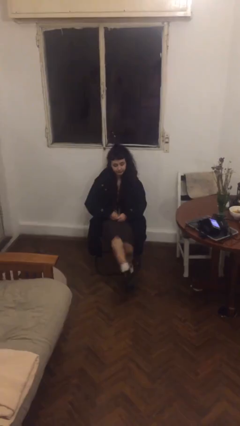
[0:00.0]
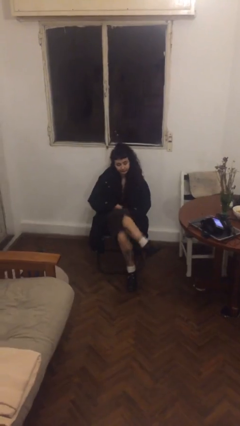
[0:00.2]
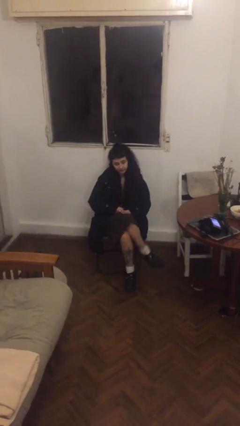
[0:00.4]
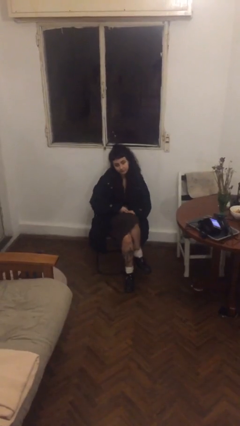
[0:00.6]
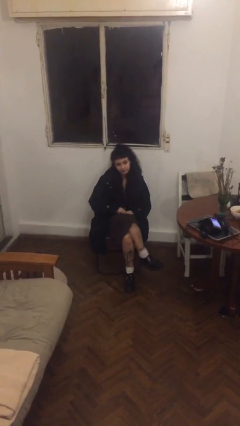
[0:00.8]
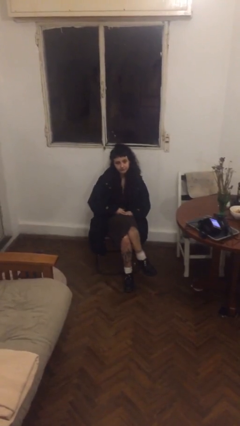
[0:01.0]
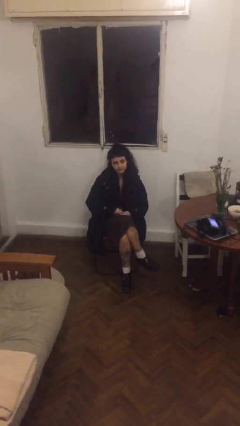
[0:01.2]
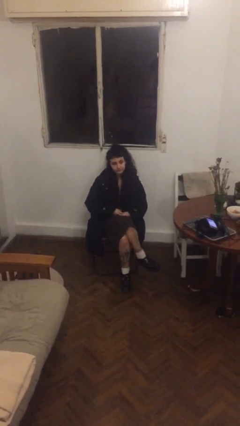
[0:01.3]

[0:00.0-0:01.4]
person crosses legs

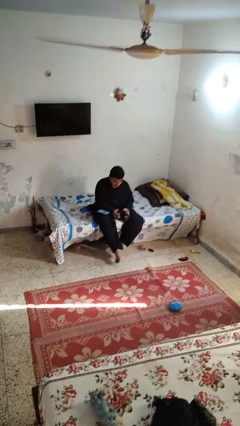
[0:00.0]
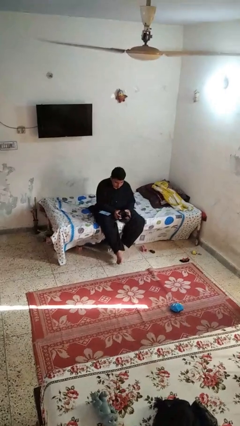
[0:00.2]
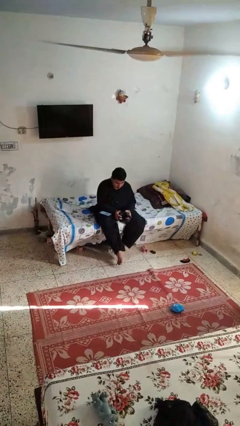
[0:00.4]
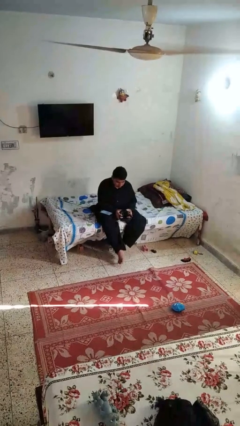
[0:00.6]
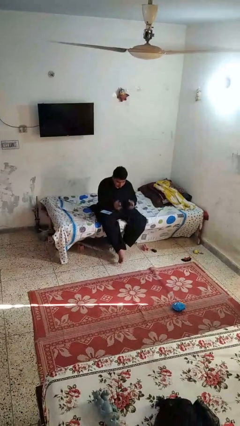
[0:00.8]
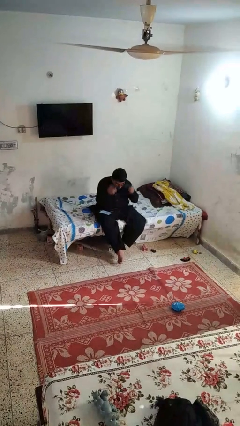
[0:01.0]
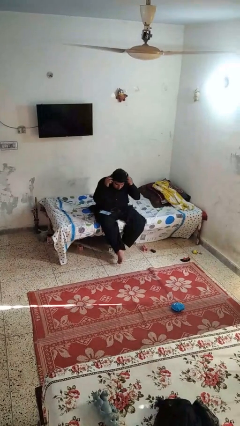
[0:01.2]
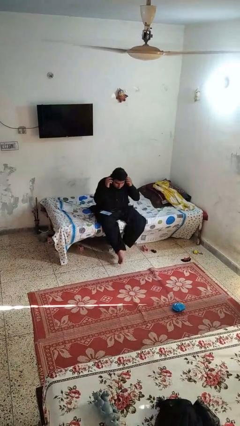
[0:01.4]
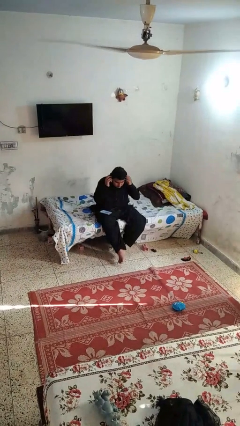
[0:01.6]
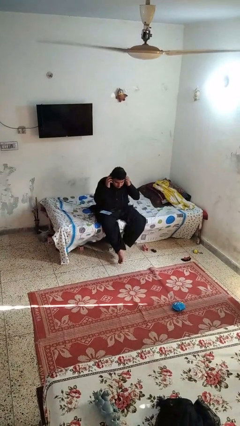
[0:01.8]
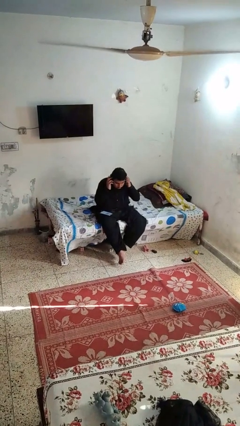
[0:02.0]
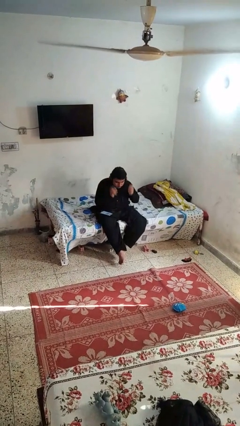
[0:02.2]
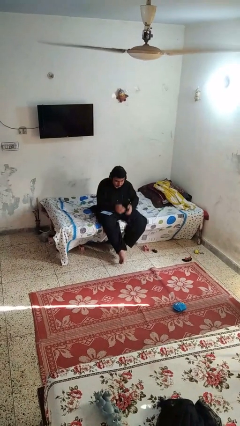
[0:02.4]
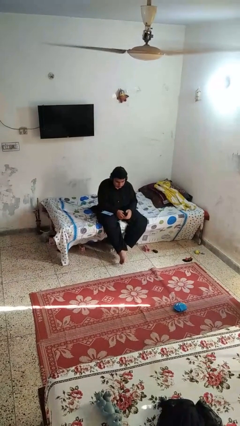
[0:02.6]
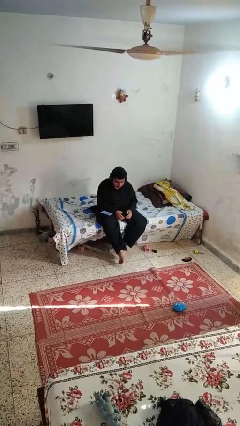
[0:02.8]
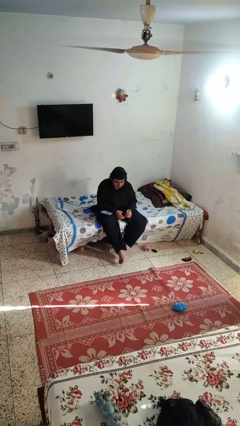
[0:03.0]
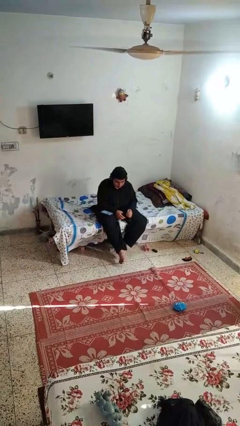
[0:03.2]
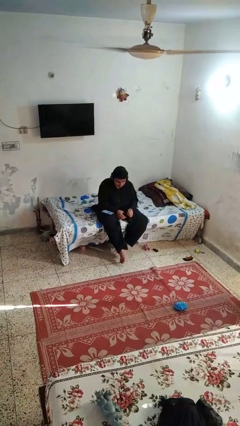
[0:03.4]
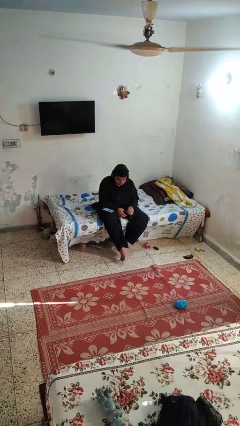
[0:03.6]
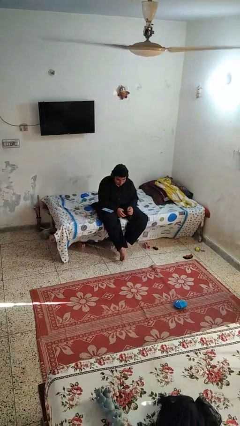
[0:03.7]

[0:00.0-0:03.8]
person puts on headphones

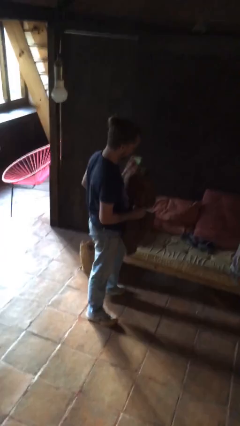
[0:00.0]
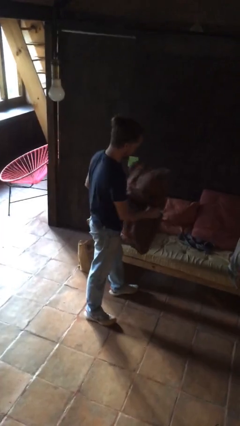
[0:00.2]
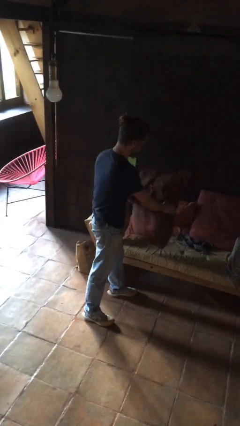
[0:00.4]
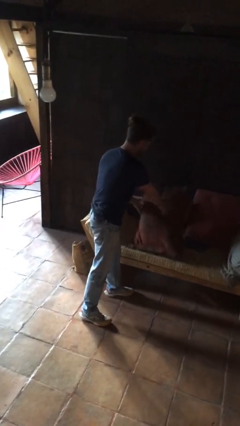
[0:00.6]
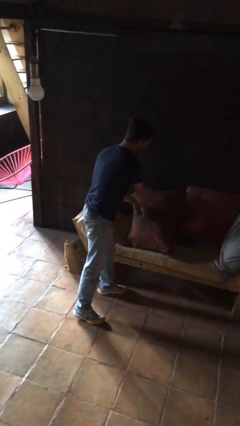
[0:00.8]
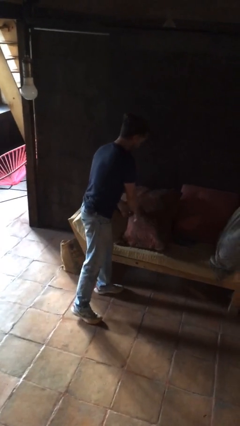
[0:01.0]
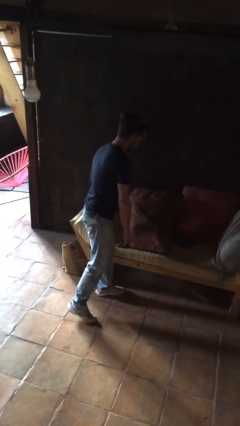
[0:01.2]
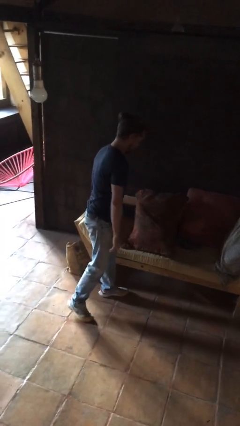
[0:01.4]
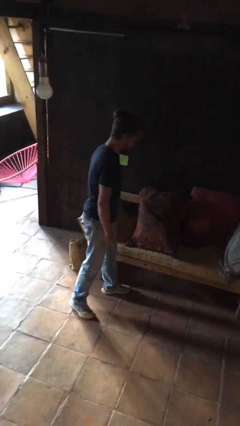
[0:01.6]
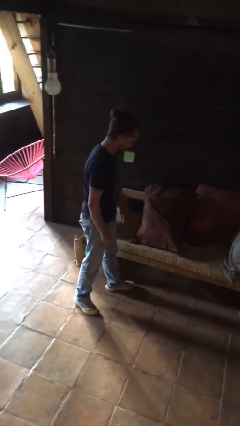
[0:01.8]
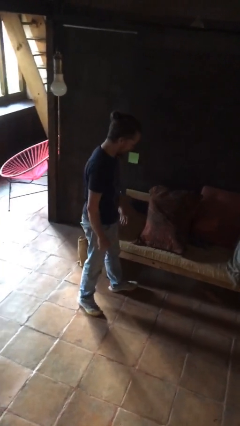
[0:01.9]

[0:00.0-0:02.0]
person puts down object on couch

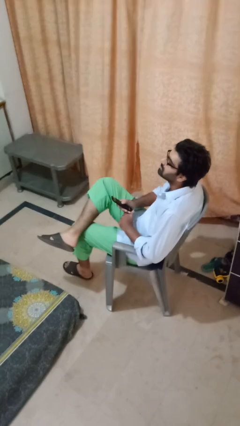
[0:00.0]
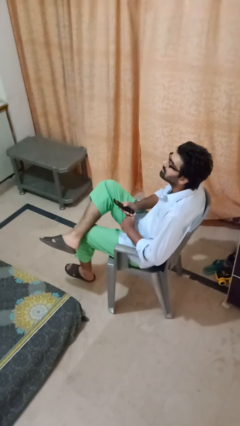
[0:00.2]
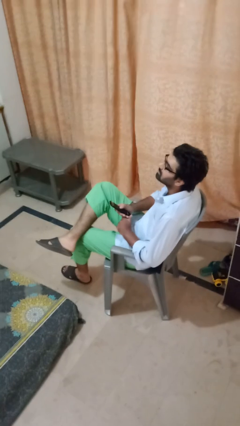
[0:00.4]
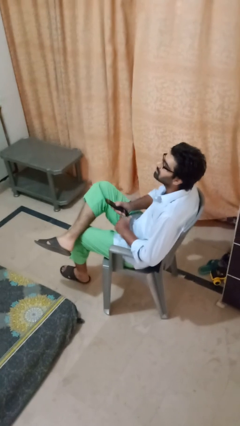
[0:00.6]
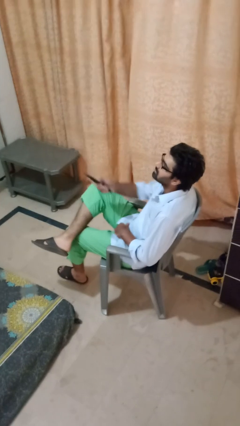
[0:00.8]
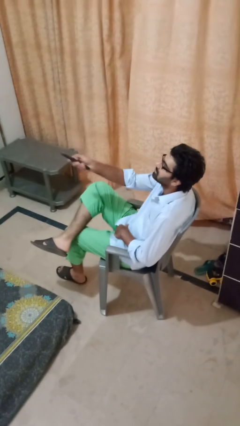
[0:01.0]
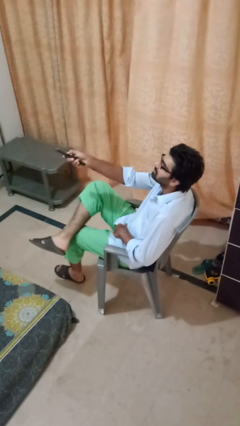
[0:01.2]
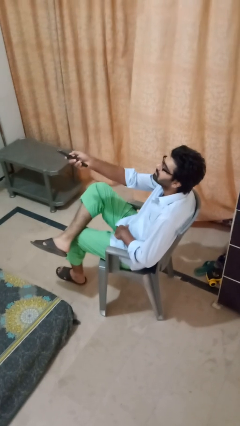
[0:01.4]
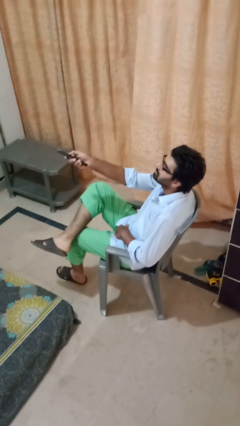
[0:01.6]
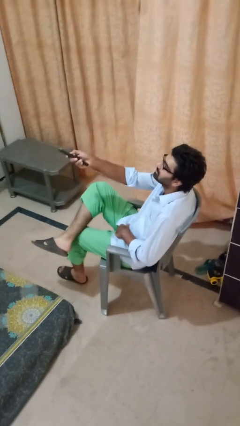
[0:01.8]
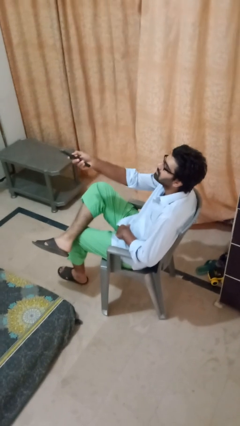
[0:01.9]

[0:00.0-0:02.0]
person uses television remote

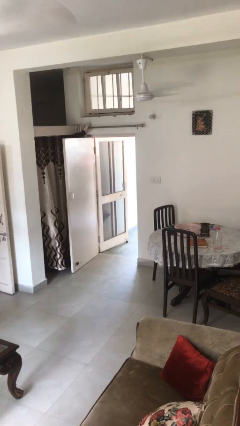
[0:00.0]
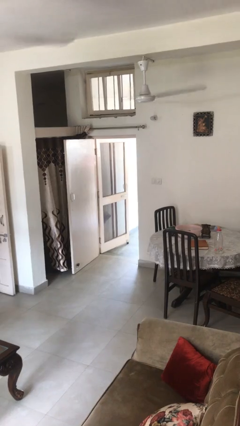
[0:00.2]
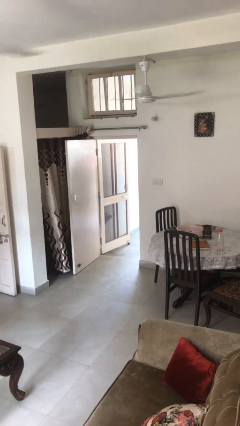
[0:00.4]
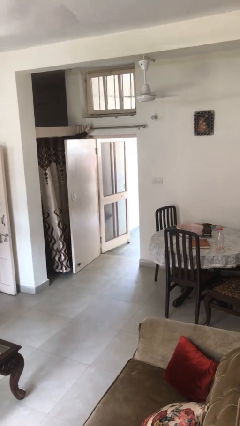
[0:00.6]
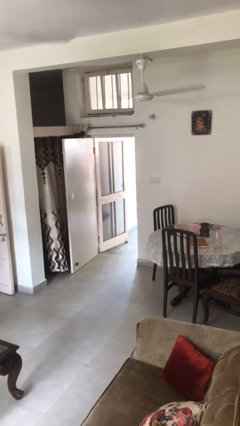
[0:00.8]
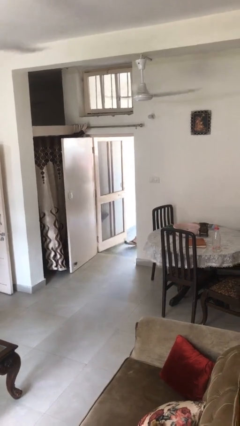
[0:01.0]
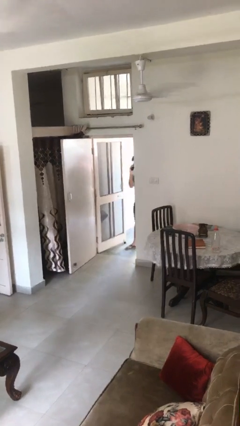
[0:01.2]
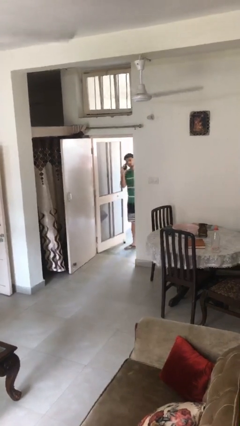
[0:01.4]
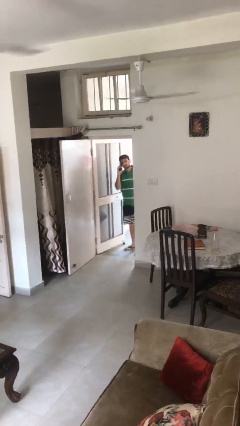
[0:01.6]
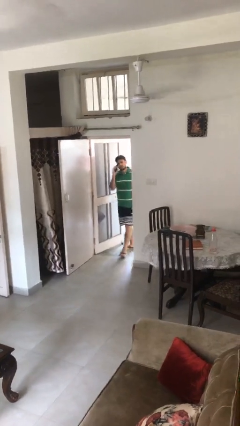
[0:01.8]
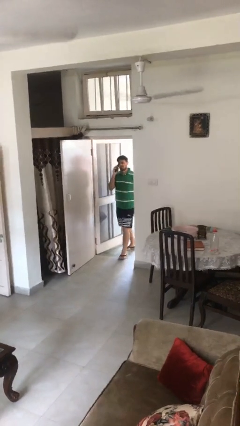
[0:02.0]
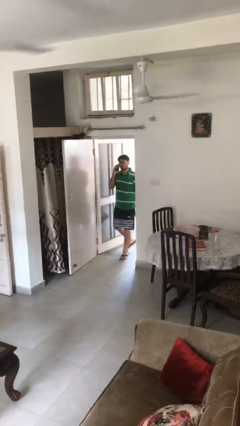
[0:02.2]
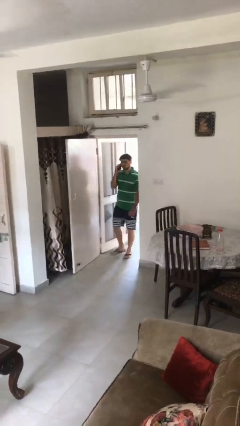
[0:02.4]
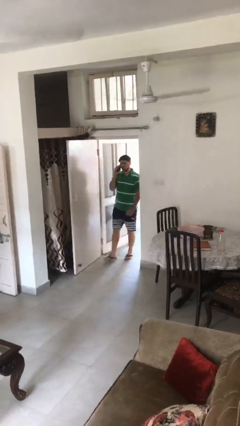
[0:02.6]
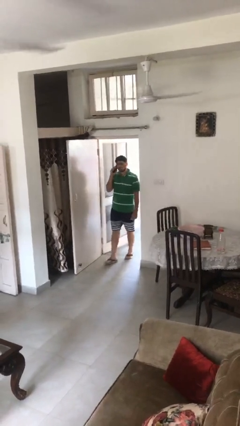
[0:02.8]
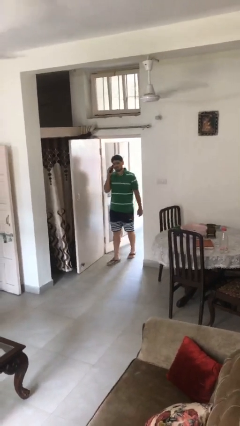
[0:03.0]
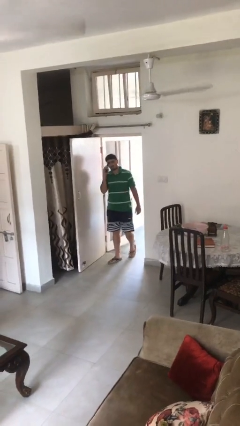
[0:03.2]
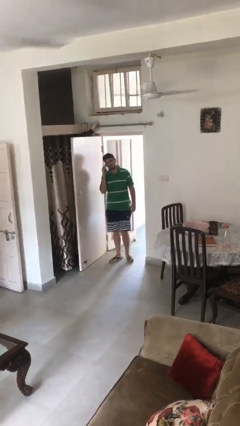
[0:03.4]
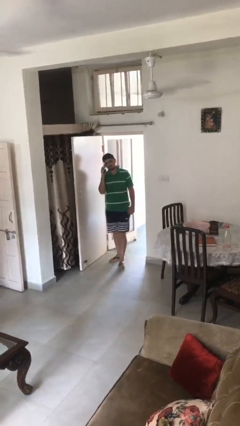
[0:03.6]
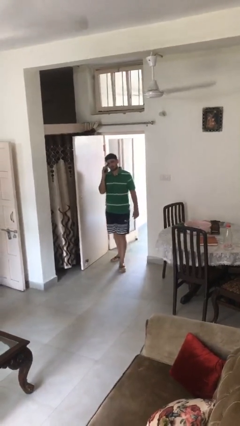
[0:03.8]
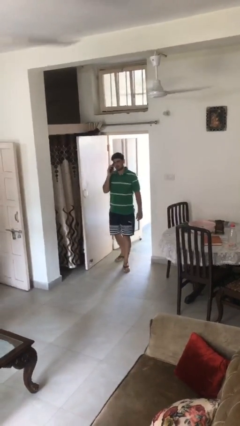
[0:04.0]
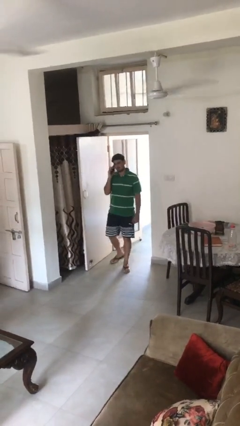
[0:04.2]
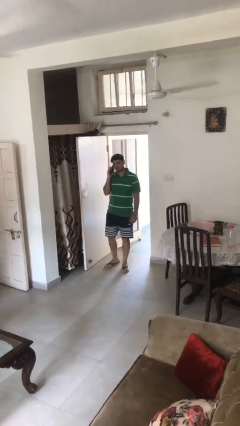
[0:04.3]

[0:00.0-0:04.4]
person enters scene through structure

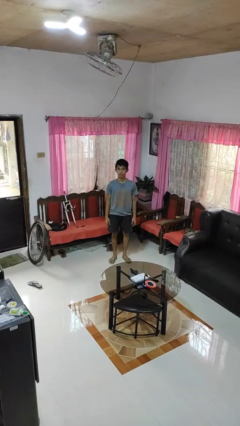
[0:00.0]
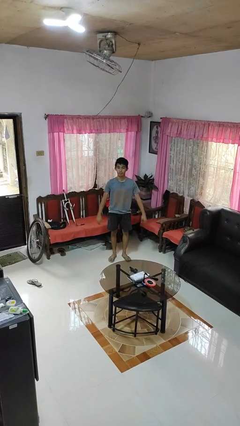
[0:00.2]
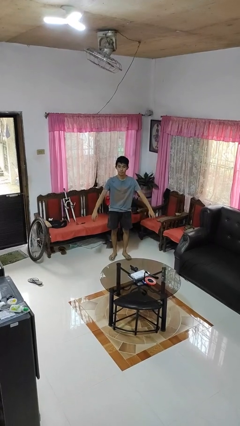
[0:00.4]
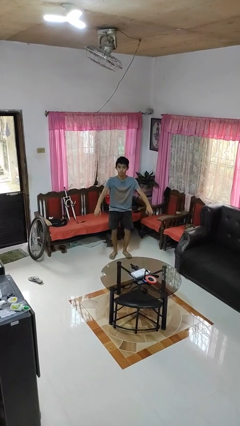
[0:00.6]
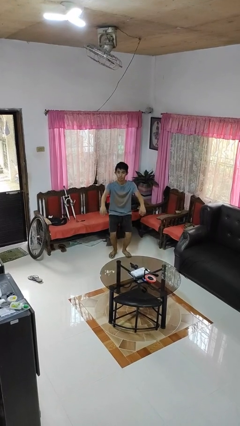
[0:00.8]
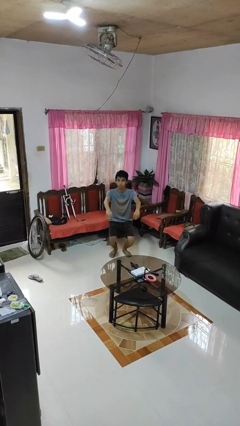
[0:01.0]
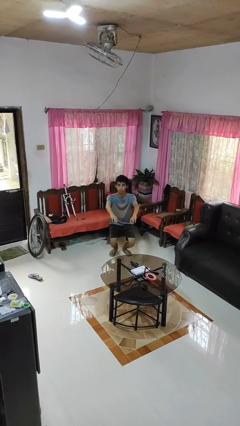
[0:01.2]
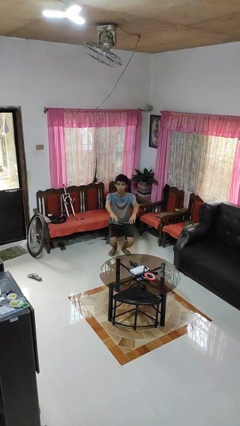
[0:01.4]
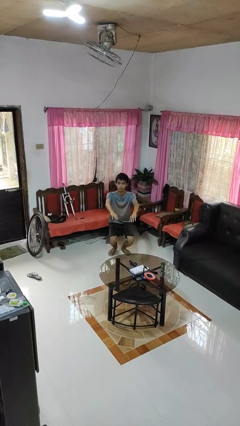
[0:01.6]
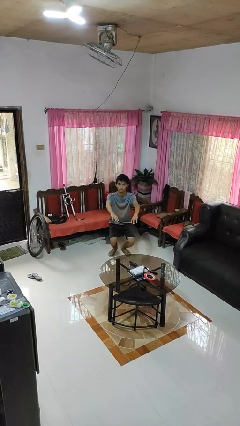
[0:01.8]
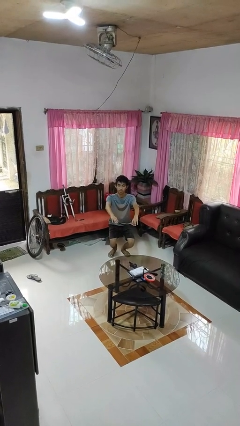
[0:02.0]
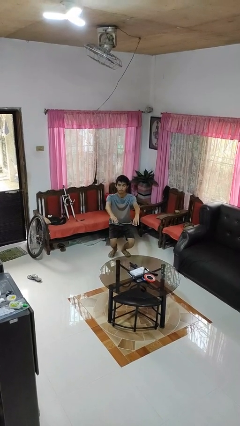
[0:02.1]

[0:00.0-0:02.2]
person squats

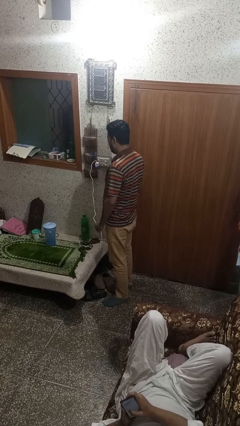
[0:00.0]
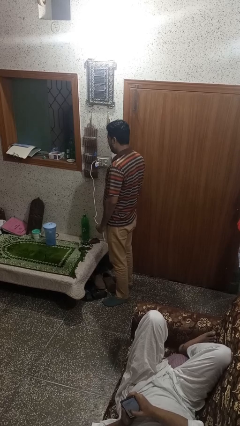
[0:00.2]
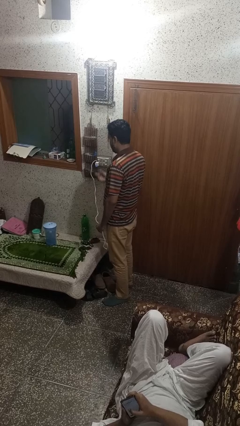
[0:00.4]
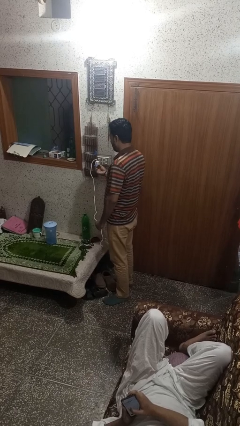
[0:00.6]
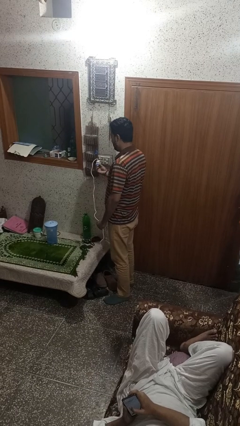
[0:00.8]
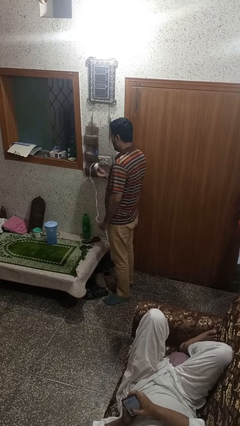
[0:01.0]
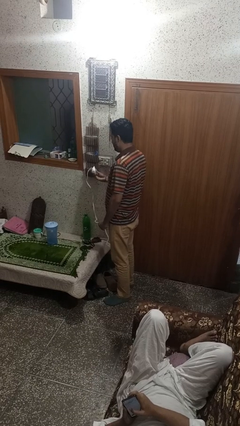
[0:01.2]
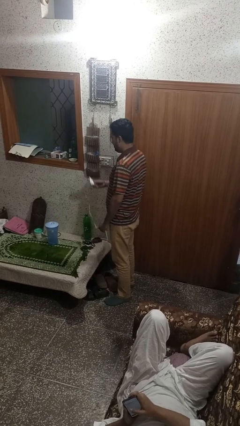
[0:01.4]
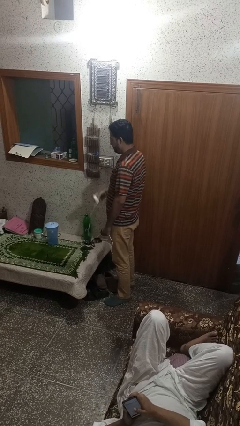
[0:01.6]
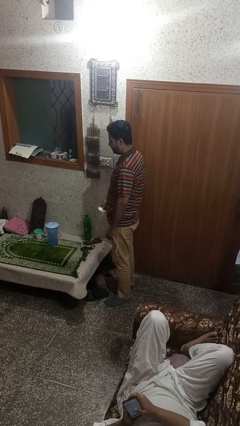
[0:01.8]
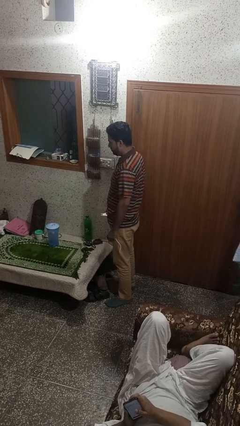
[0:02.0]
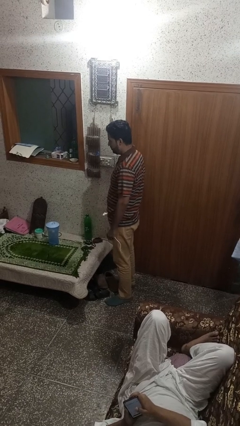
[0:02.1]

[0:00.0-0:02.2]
person unplugs from electrical socket
